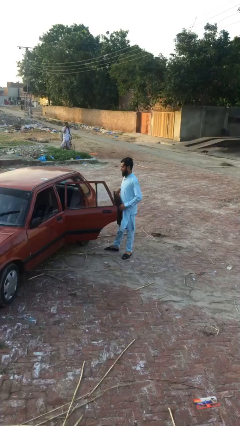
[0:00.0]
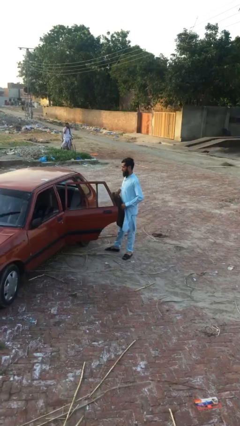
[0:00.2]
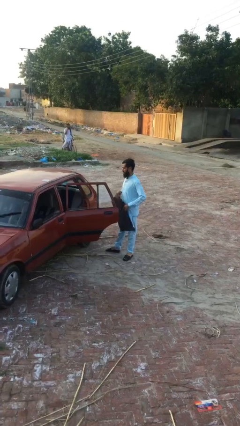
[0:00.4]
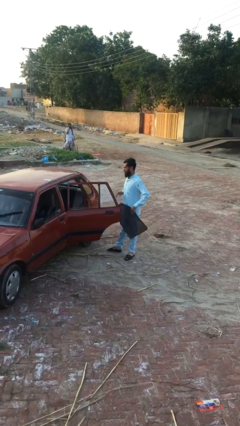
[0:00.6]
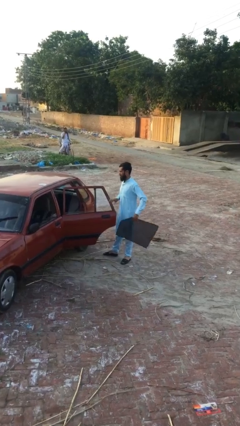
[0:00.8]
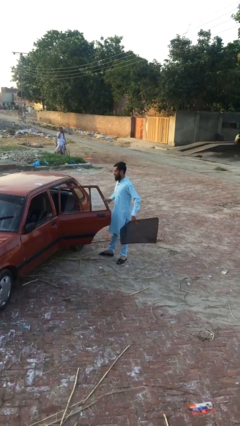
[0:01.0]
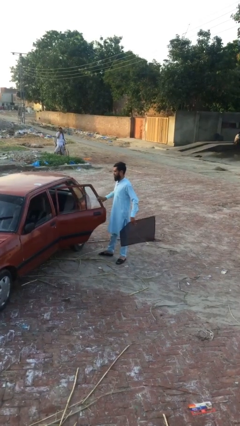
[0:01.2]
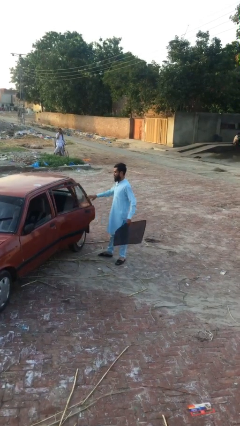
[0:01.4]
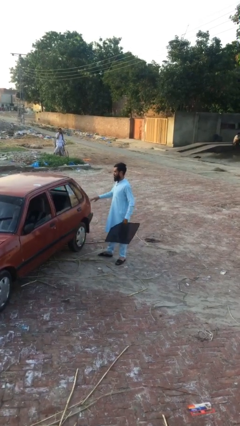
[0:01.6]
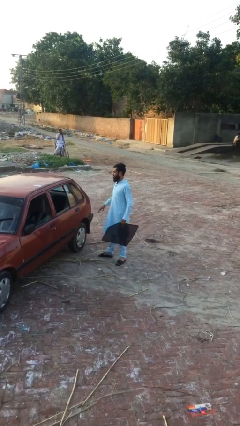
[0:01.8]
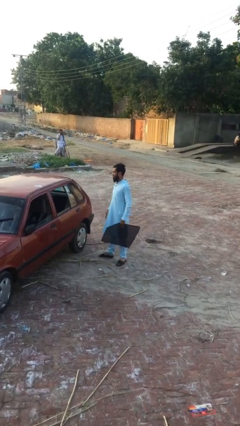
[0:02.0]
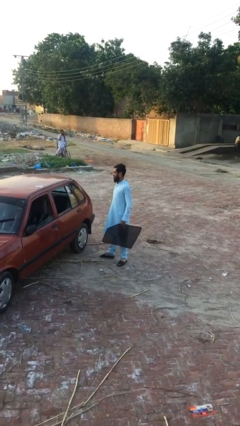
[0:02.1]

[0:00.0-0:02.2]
person closes car door

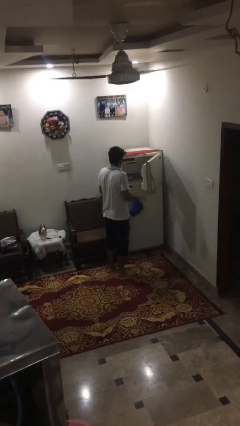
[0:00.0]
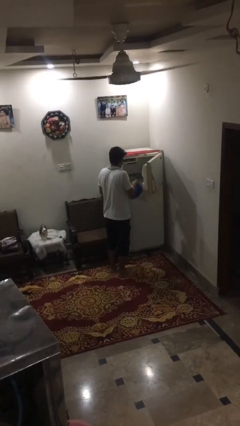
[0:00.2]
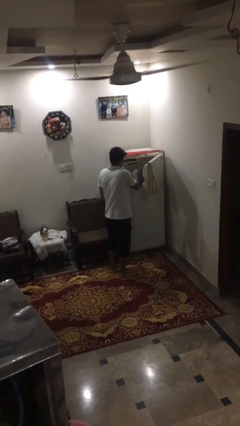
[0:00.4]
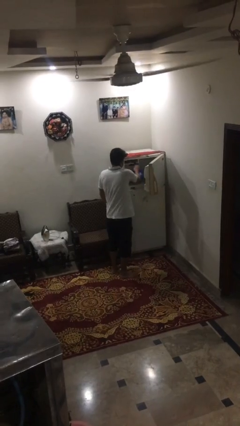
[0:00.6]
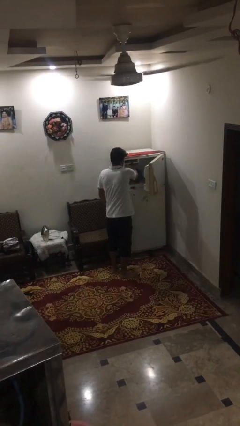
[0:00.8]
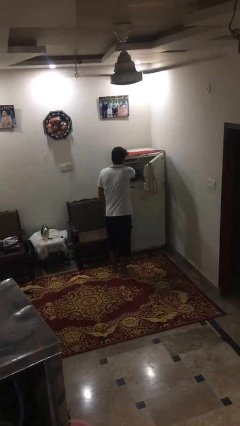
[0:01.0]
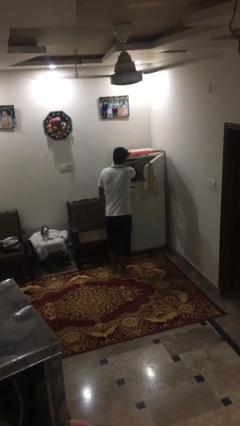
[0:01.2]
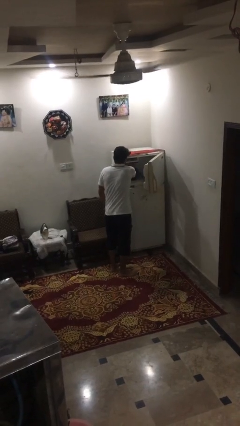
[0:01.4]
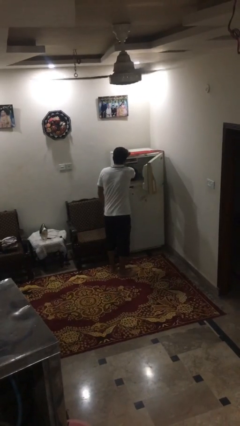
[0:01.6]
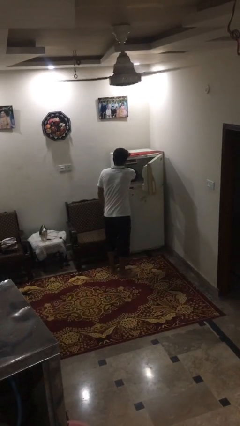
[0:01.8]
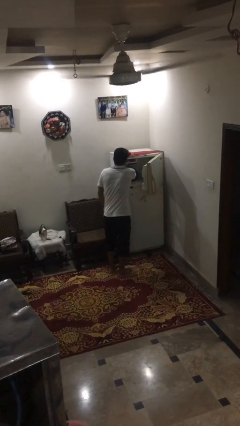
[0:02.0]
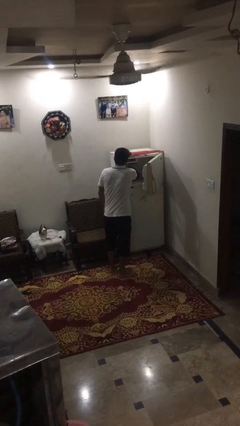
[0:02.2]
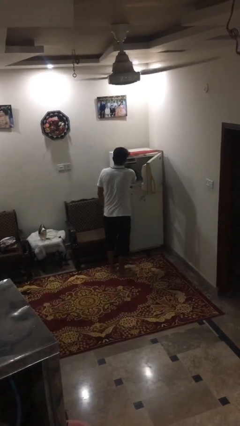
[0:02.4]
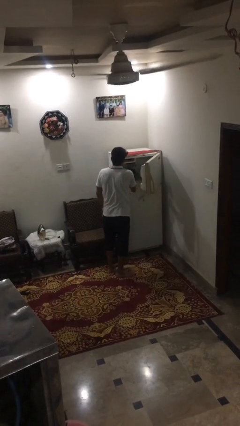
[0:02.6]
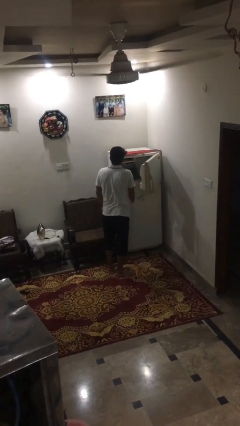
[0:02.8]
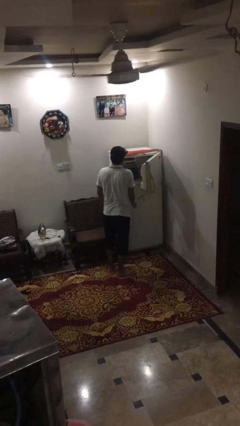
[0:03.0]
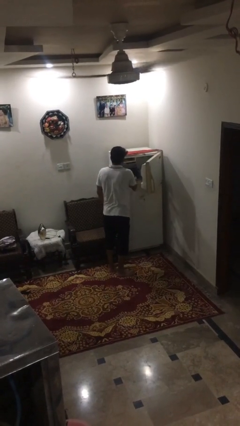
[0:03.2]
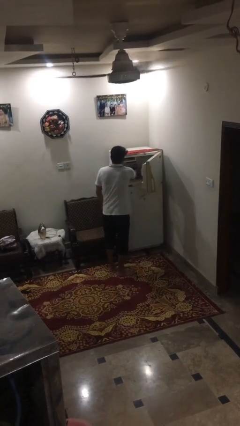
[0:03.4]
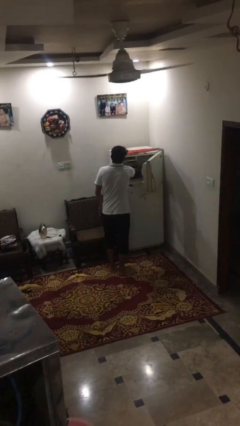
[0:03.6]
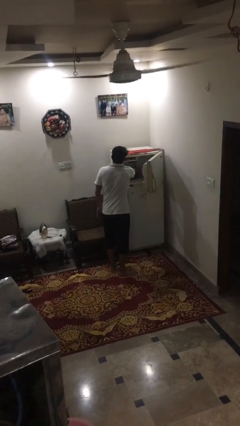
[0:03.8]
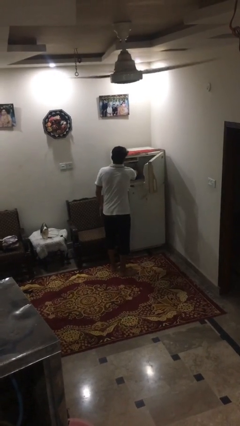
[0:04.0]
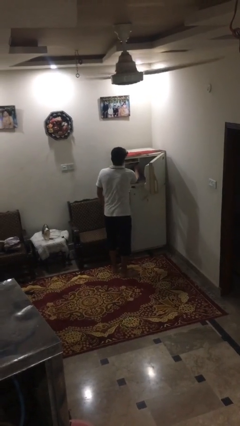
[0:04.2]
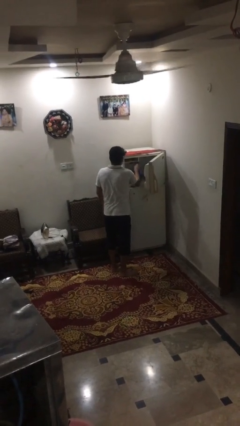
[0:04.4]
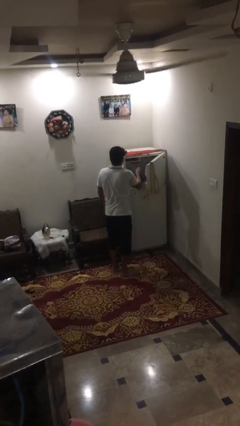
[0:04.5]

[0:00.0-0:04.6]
person loads groceries into refrigerator

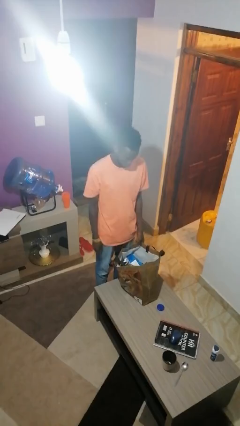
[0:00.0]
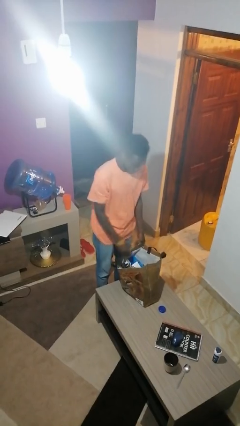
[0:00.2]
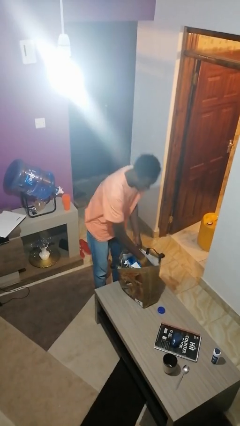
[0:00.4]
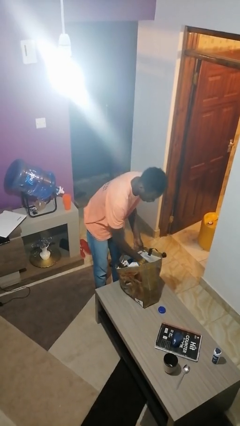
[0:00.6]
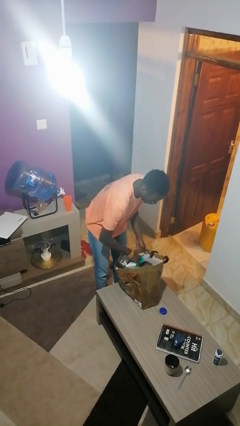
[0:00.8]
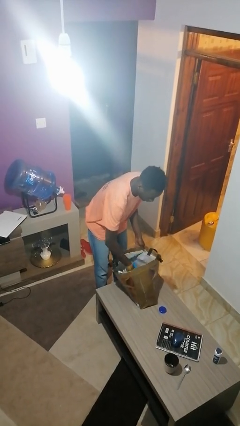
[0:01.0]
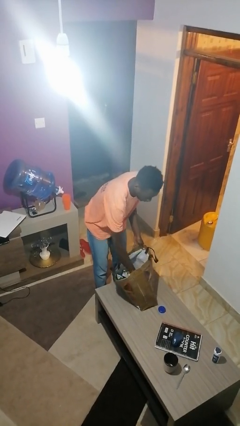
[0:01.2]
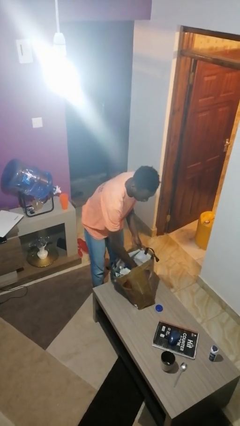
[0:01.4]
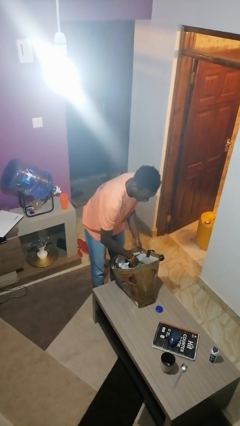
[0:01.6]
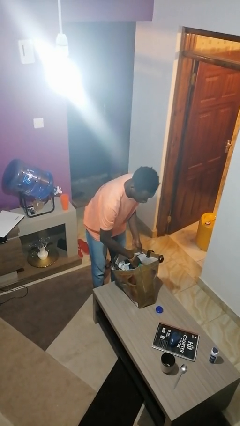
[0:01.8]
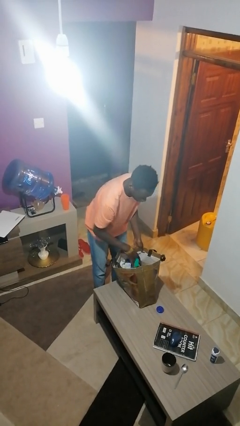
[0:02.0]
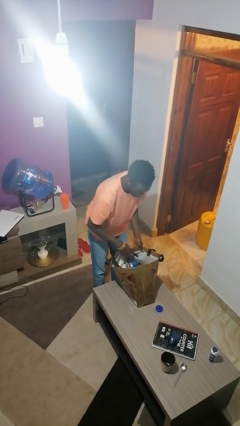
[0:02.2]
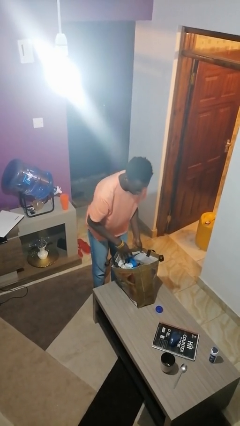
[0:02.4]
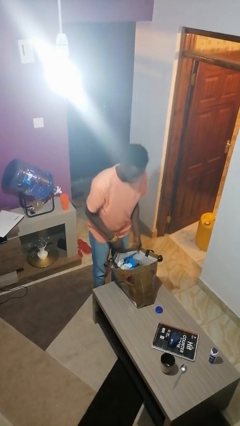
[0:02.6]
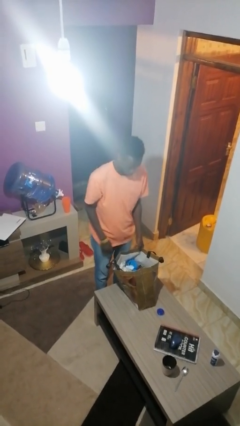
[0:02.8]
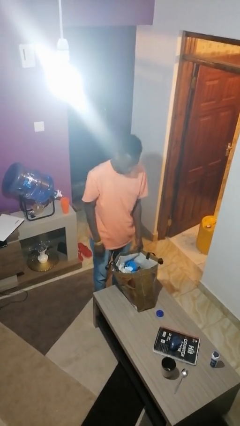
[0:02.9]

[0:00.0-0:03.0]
person searches in bag

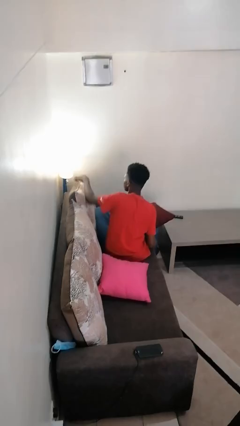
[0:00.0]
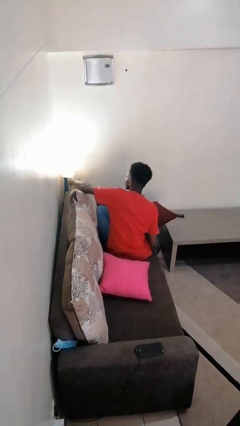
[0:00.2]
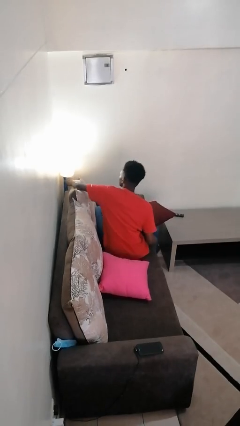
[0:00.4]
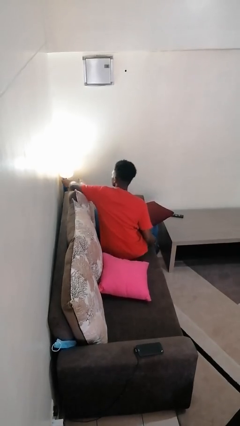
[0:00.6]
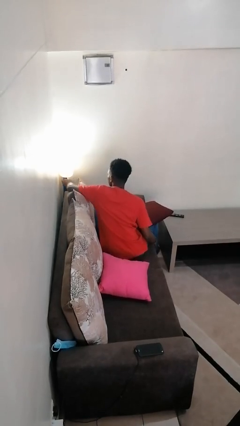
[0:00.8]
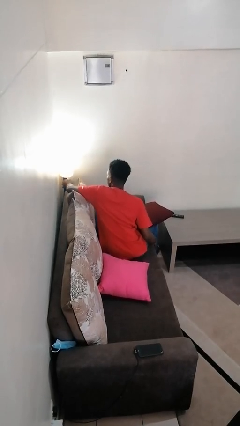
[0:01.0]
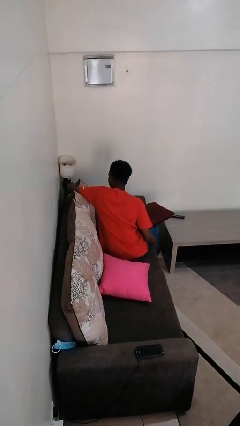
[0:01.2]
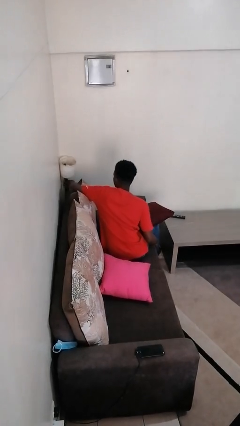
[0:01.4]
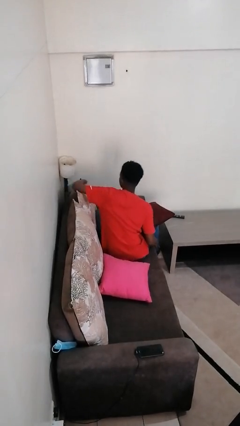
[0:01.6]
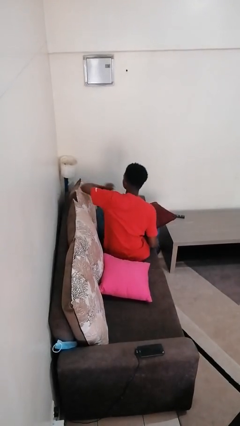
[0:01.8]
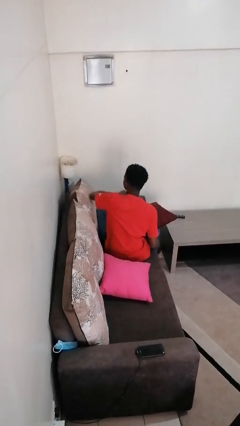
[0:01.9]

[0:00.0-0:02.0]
person turns off lamp

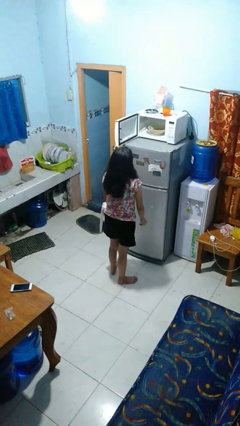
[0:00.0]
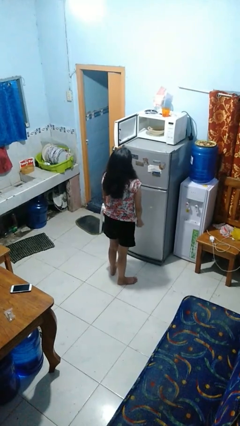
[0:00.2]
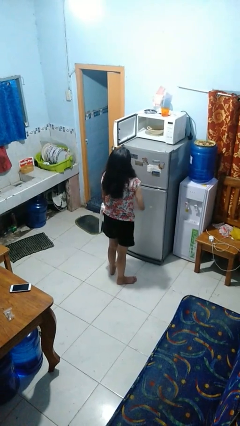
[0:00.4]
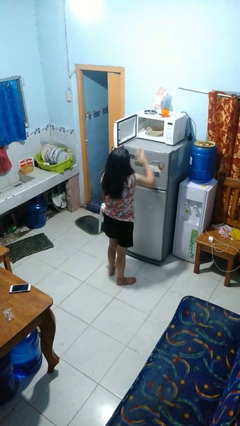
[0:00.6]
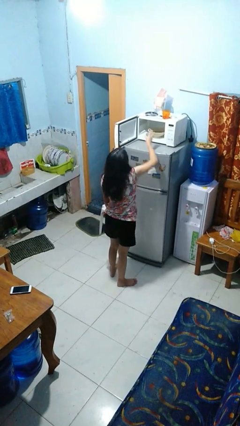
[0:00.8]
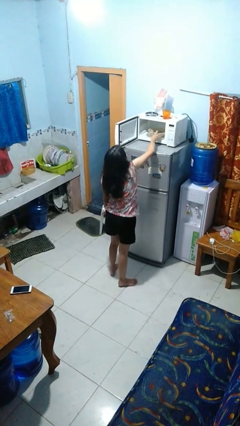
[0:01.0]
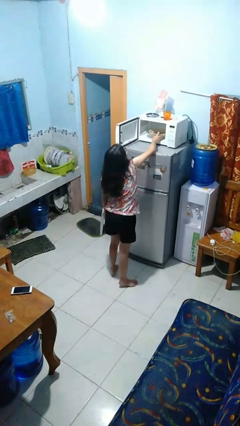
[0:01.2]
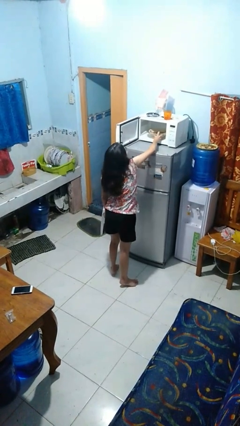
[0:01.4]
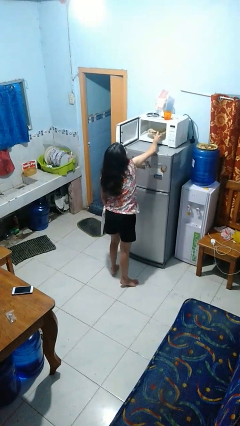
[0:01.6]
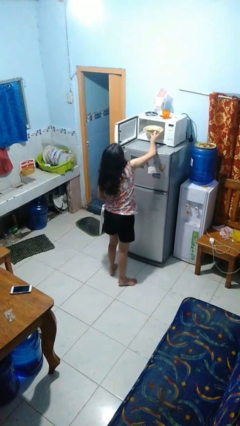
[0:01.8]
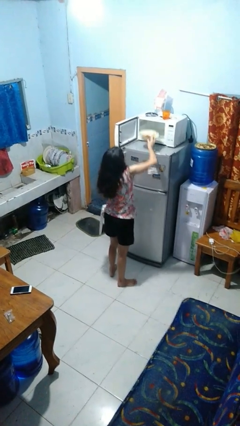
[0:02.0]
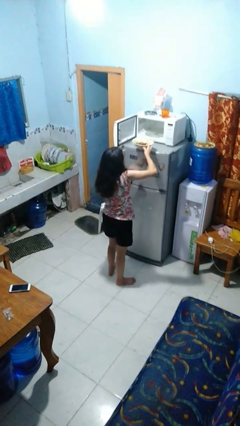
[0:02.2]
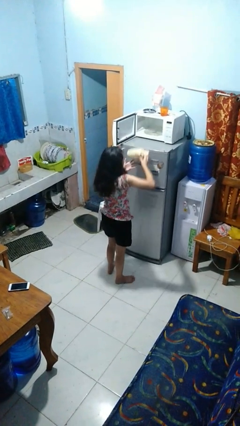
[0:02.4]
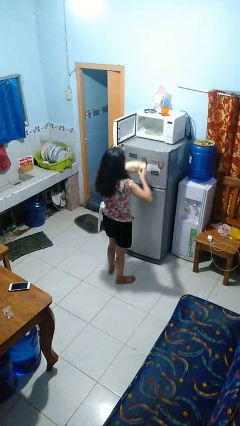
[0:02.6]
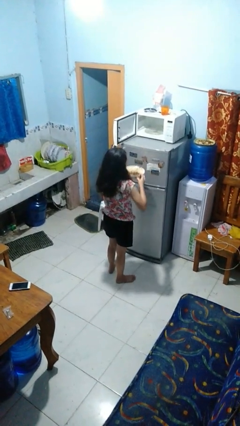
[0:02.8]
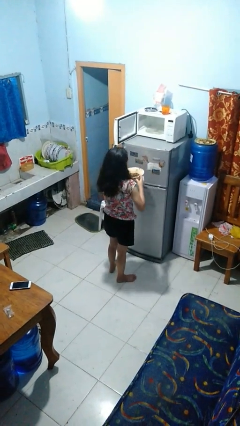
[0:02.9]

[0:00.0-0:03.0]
person takes object from microwave

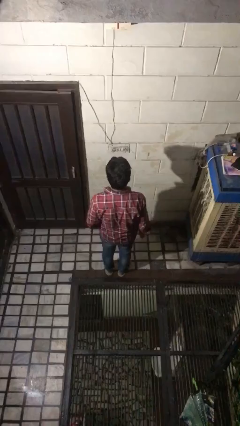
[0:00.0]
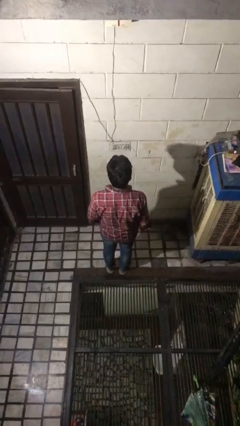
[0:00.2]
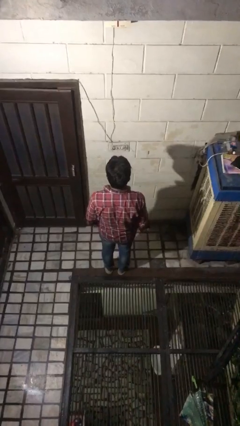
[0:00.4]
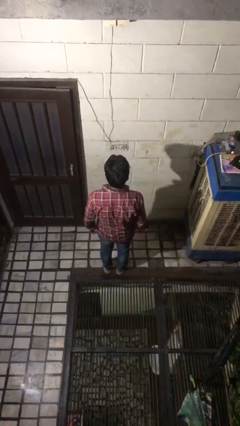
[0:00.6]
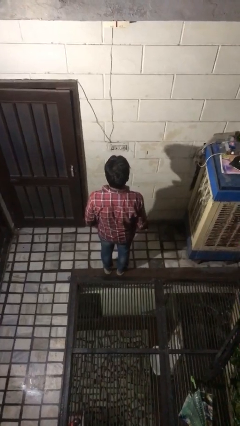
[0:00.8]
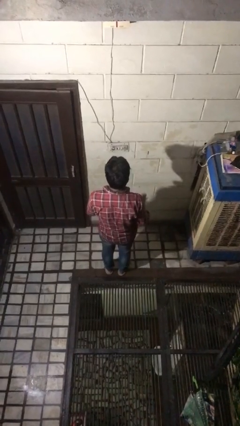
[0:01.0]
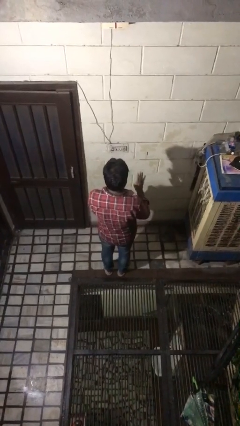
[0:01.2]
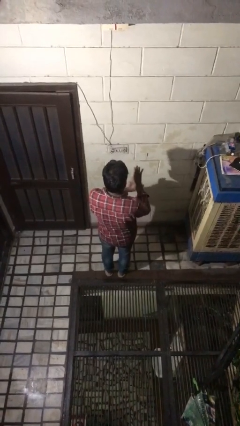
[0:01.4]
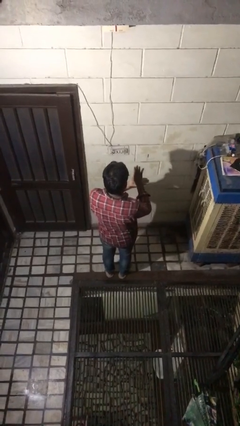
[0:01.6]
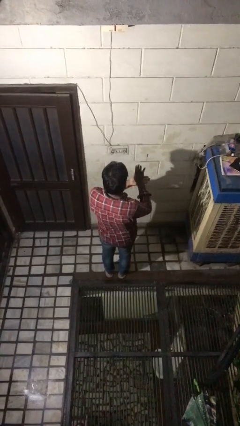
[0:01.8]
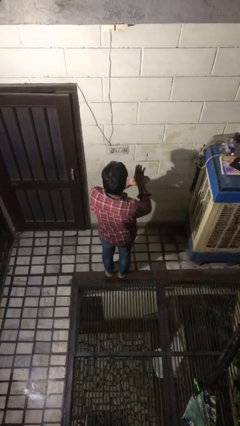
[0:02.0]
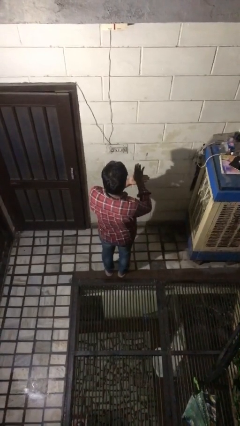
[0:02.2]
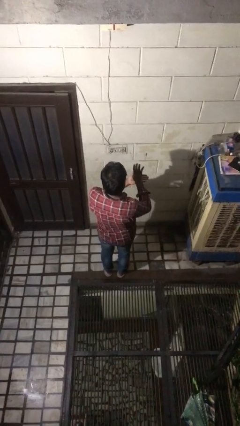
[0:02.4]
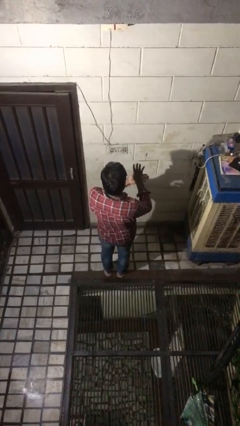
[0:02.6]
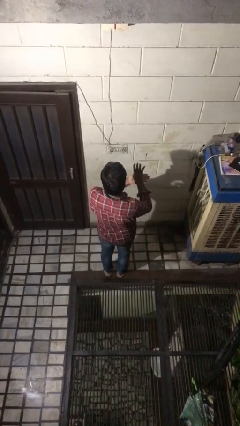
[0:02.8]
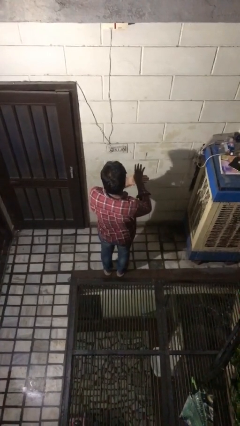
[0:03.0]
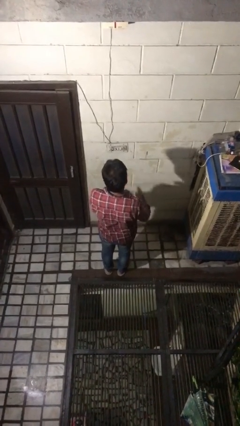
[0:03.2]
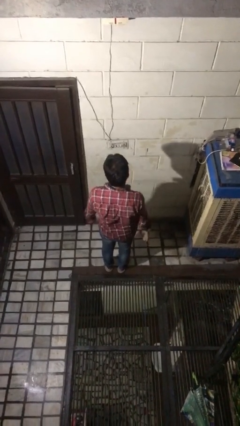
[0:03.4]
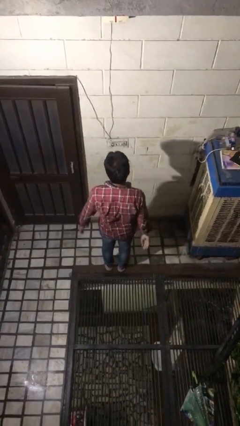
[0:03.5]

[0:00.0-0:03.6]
person gestures number four
